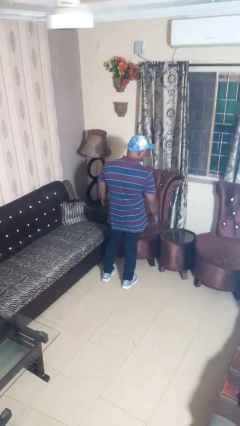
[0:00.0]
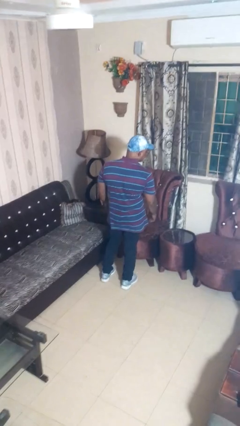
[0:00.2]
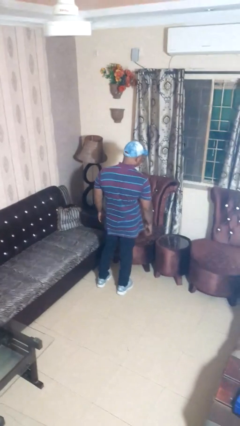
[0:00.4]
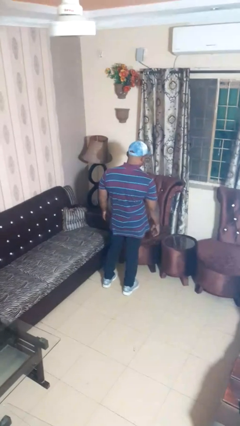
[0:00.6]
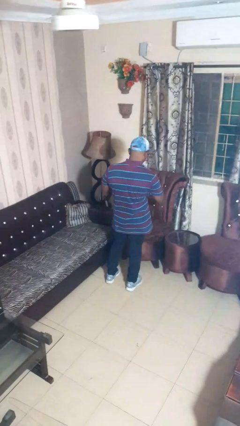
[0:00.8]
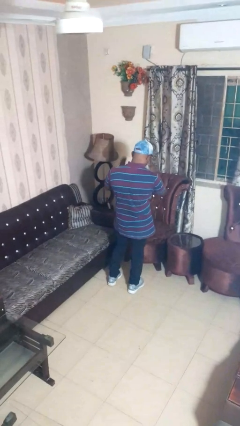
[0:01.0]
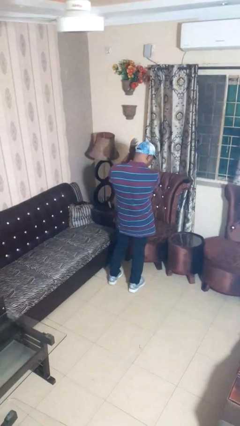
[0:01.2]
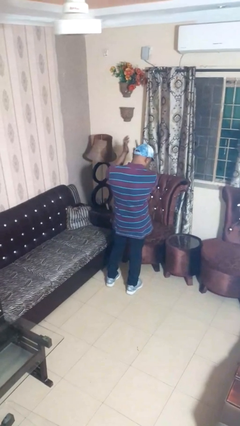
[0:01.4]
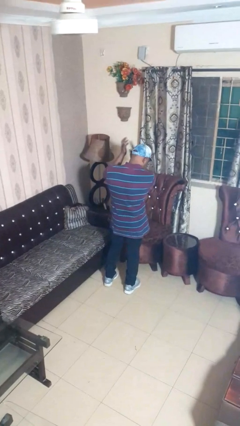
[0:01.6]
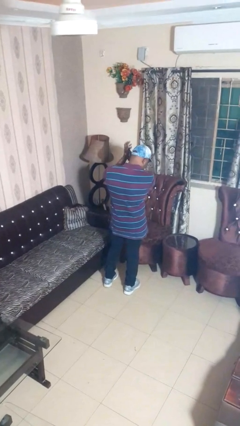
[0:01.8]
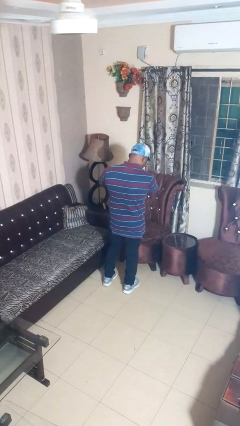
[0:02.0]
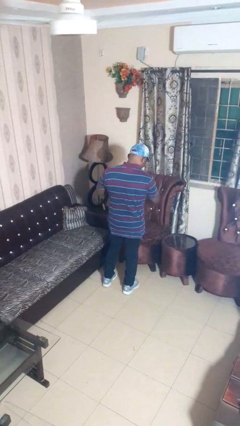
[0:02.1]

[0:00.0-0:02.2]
person claps hands

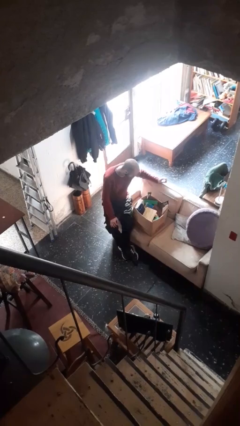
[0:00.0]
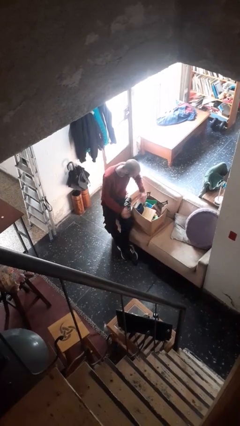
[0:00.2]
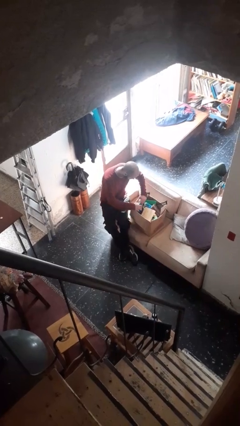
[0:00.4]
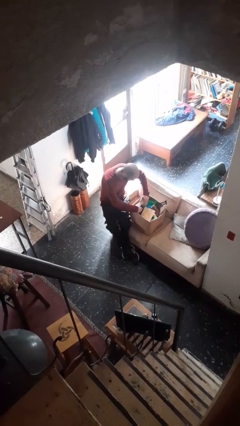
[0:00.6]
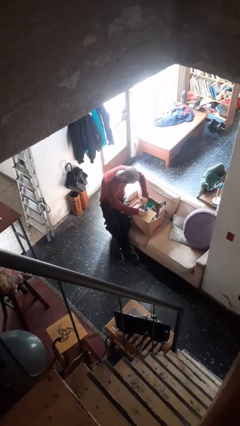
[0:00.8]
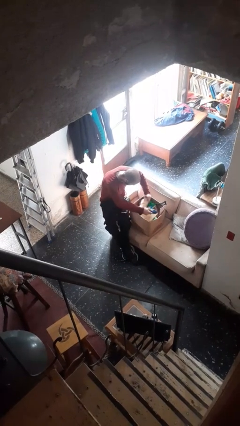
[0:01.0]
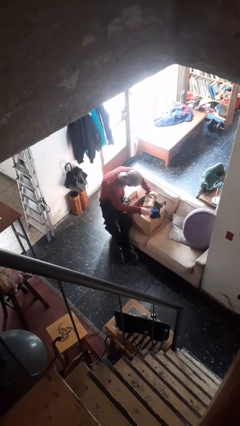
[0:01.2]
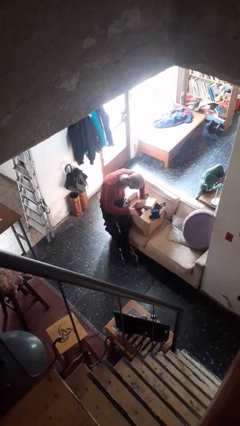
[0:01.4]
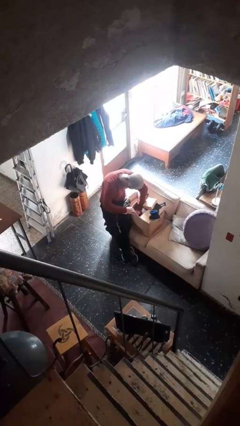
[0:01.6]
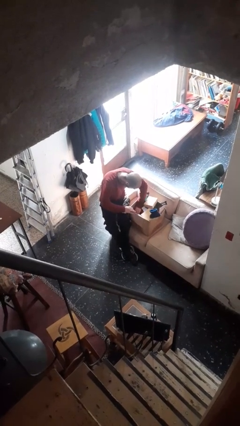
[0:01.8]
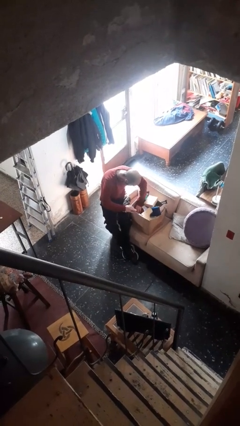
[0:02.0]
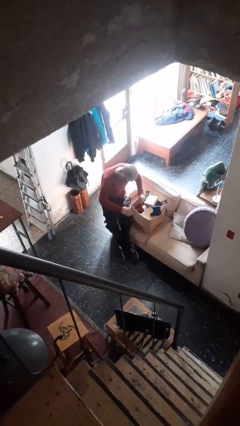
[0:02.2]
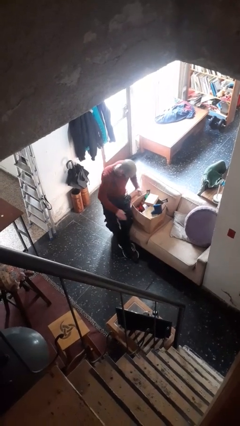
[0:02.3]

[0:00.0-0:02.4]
person searches in box

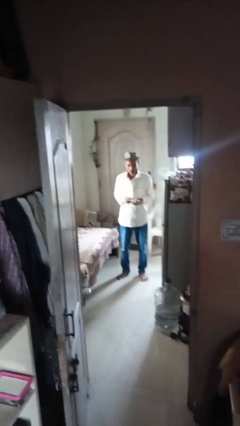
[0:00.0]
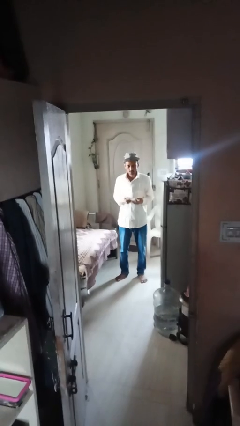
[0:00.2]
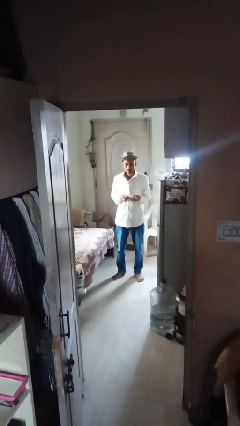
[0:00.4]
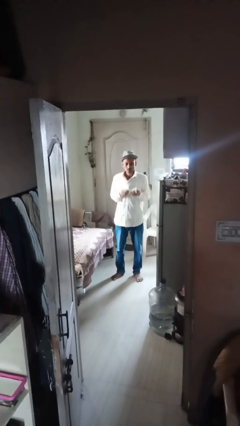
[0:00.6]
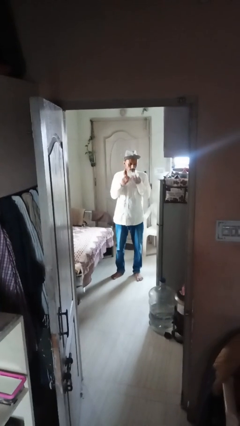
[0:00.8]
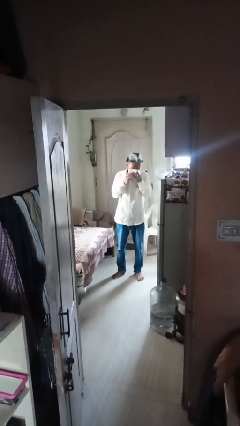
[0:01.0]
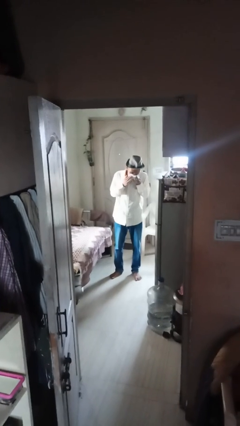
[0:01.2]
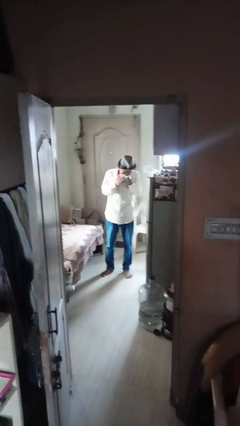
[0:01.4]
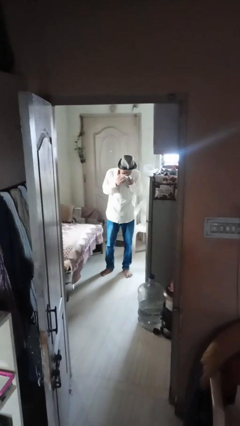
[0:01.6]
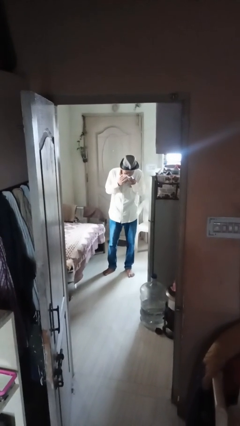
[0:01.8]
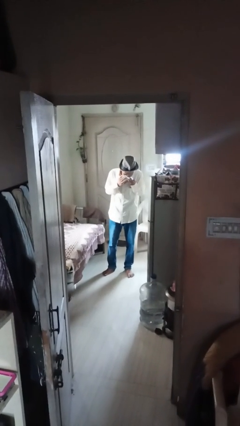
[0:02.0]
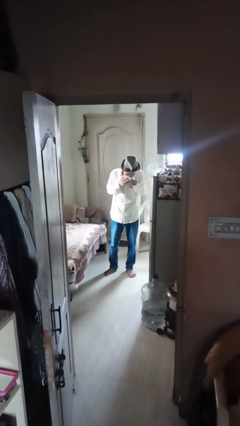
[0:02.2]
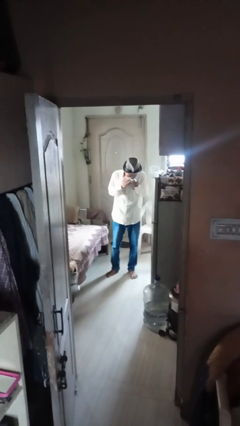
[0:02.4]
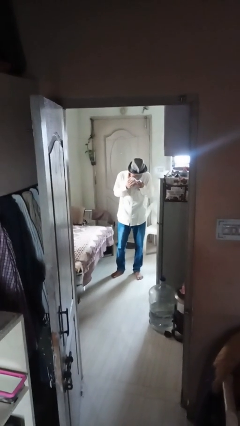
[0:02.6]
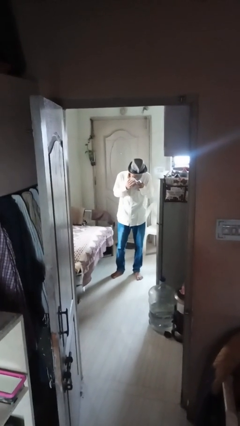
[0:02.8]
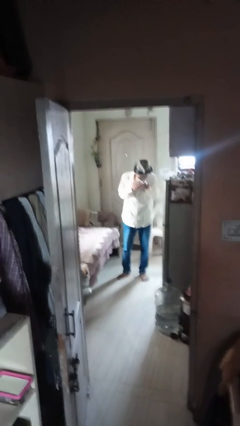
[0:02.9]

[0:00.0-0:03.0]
person blows nose

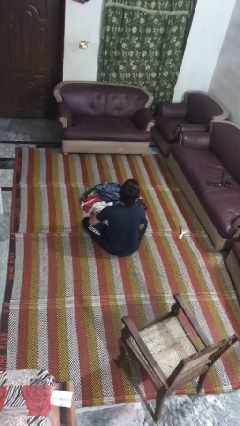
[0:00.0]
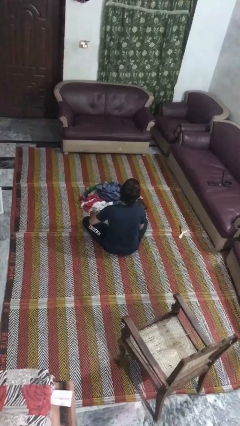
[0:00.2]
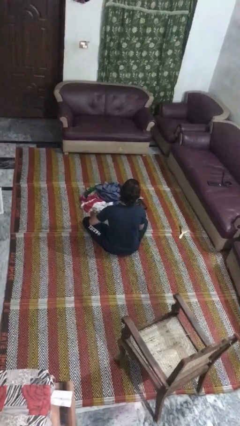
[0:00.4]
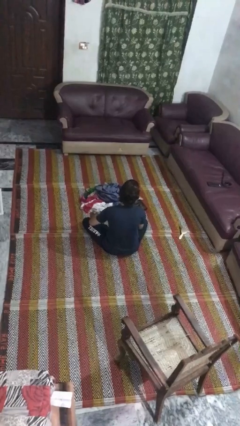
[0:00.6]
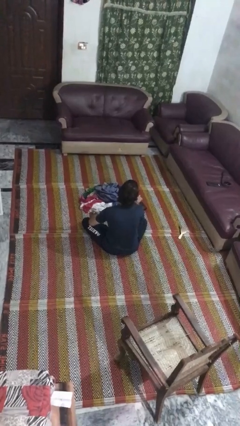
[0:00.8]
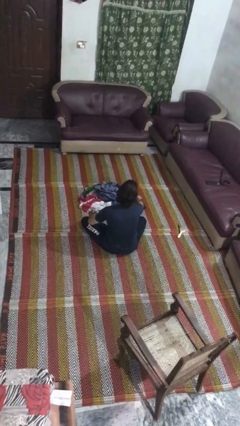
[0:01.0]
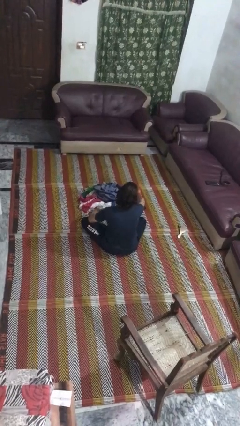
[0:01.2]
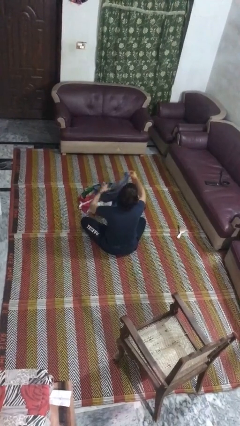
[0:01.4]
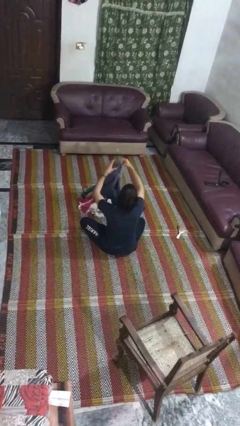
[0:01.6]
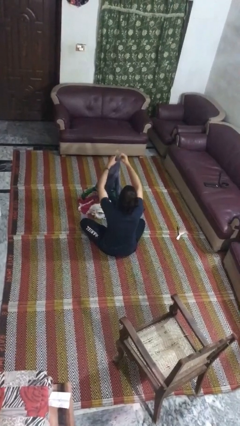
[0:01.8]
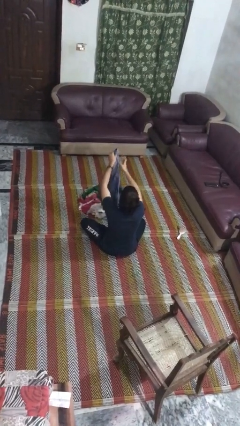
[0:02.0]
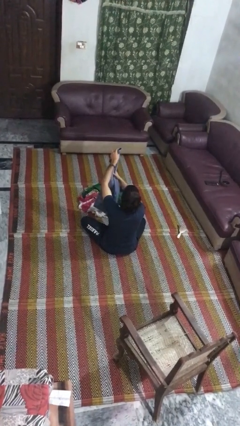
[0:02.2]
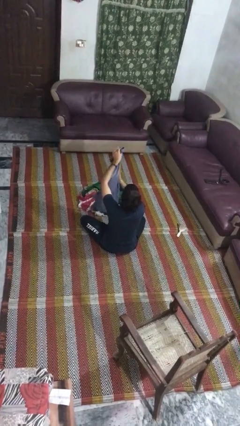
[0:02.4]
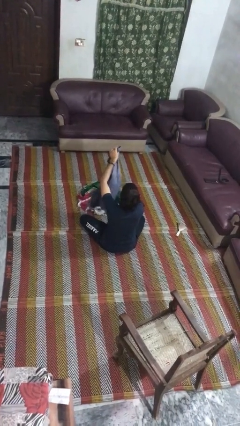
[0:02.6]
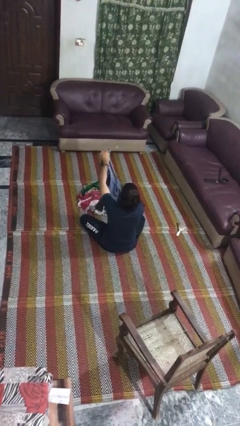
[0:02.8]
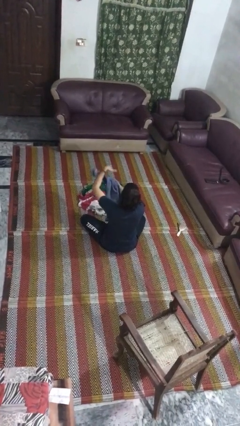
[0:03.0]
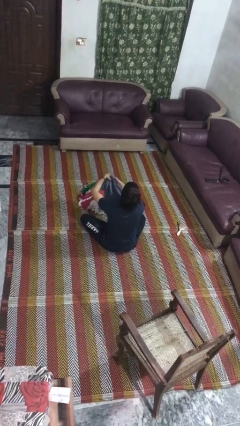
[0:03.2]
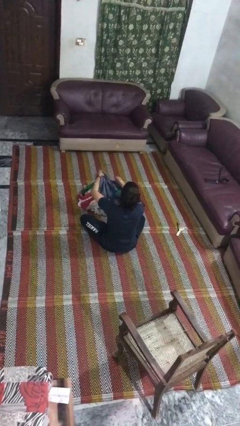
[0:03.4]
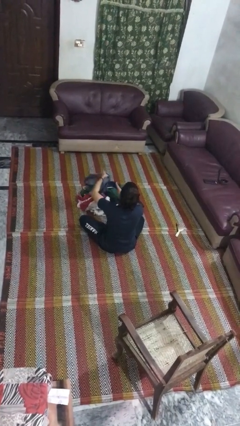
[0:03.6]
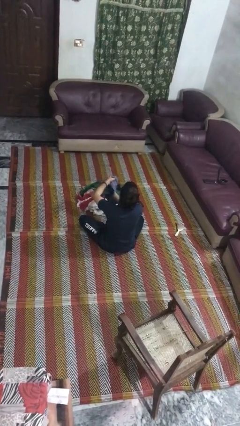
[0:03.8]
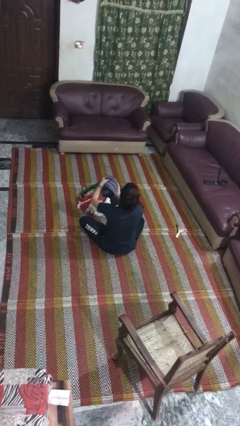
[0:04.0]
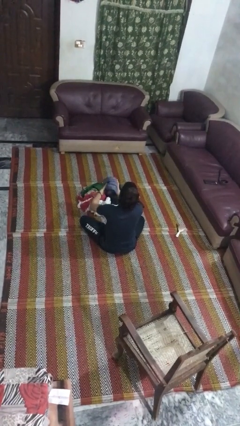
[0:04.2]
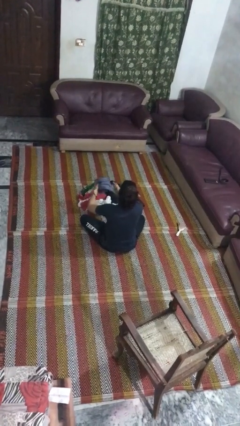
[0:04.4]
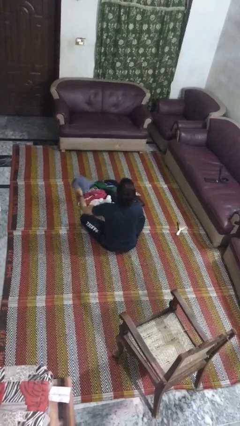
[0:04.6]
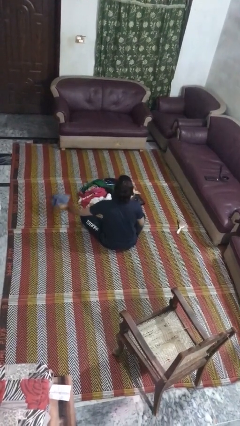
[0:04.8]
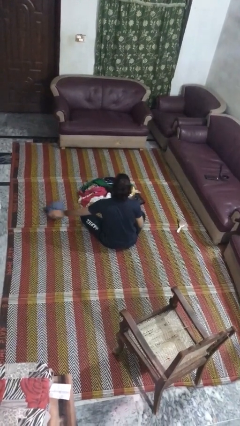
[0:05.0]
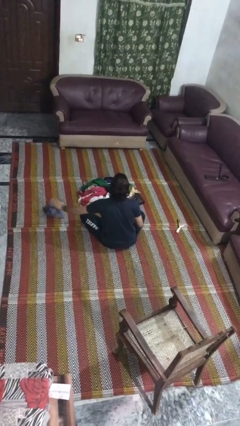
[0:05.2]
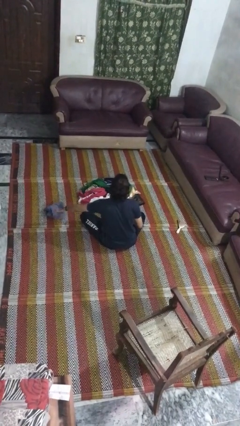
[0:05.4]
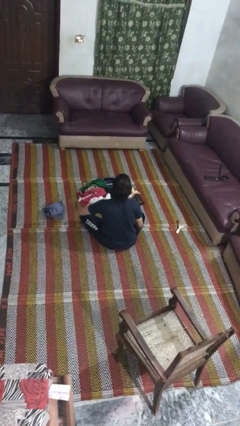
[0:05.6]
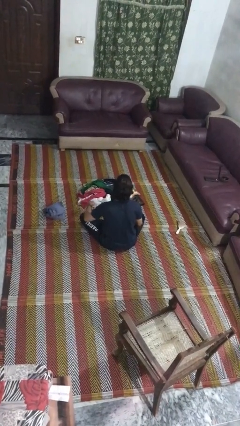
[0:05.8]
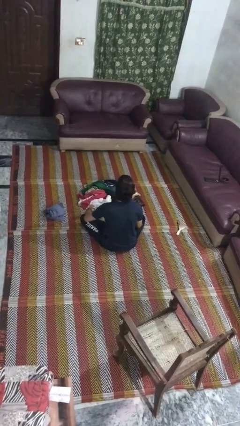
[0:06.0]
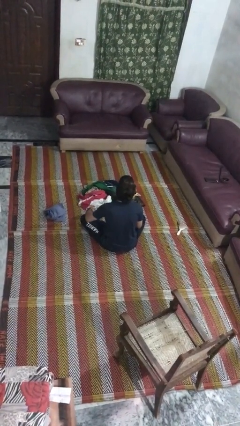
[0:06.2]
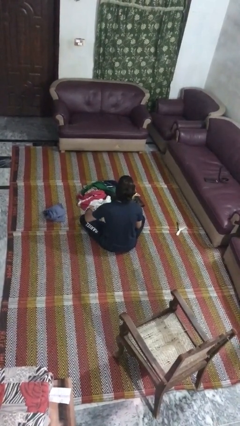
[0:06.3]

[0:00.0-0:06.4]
person folds shirt

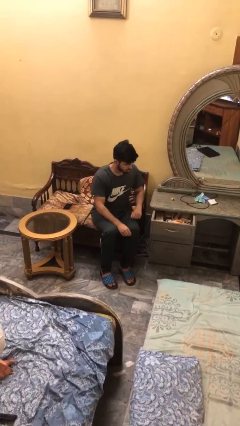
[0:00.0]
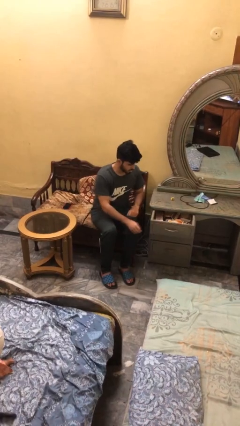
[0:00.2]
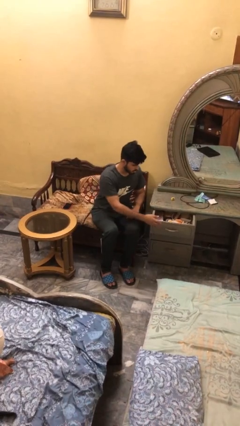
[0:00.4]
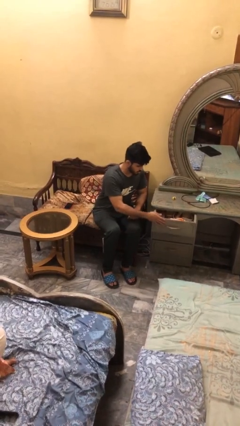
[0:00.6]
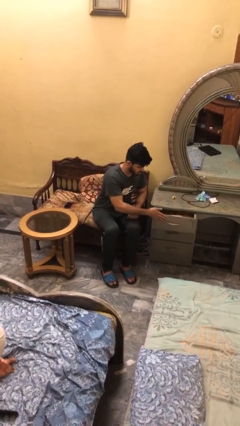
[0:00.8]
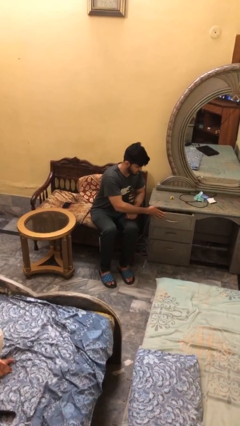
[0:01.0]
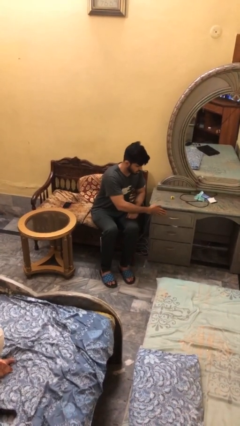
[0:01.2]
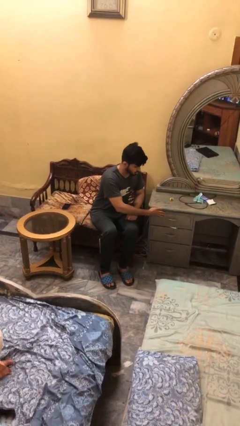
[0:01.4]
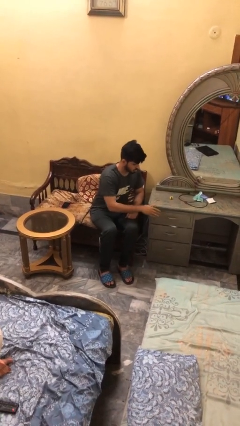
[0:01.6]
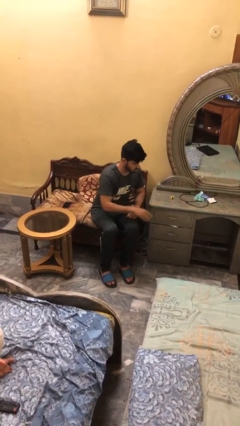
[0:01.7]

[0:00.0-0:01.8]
person closes dresser drawer

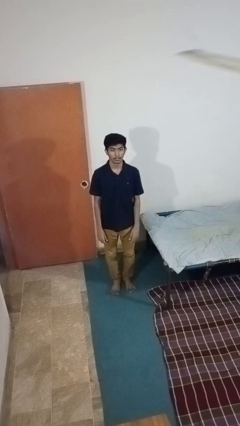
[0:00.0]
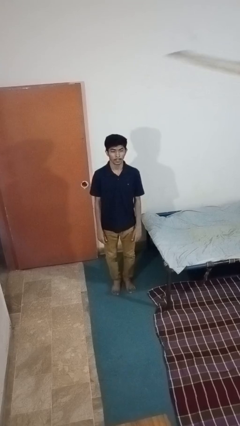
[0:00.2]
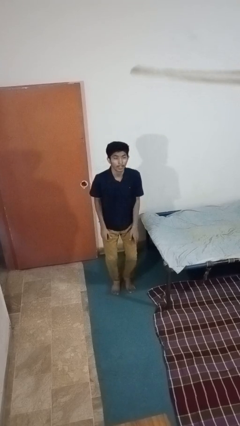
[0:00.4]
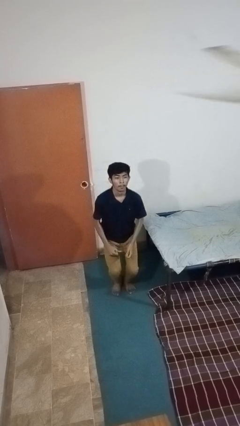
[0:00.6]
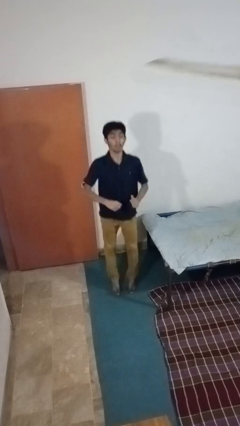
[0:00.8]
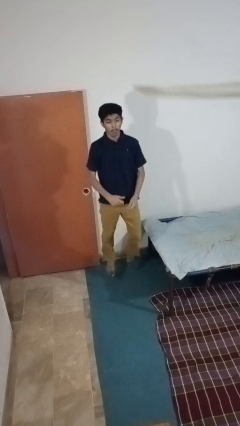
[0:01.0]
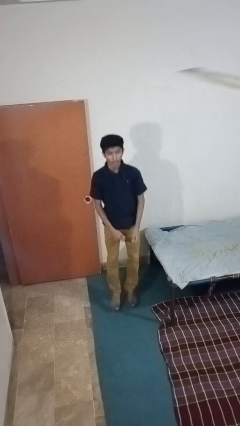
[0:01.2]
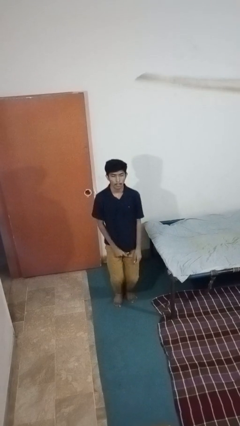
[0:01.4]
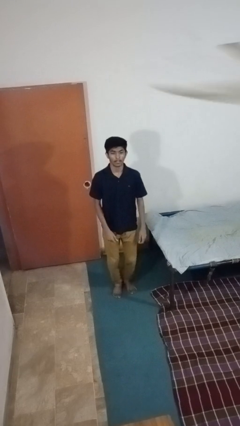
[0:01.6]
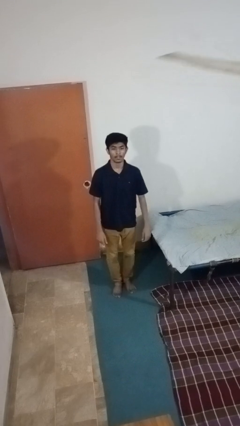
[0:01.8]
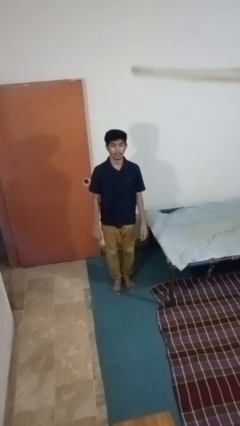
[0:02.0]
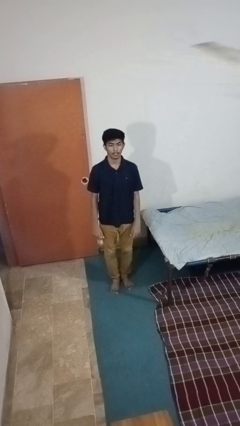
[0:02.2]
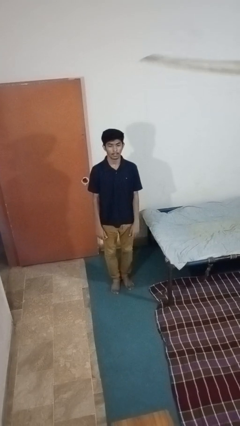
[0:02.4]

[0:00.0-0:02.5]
person jumps
